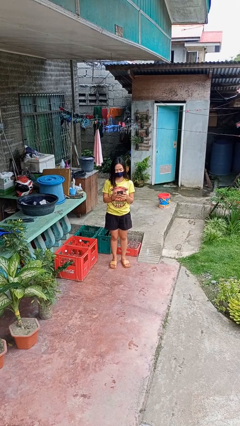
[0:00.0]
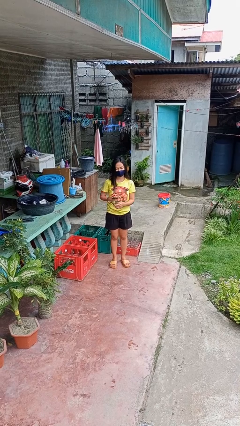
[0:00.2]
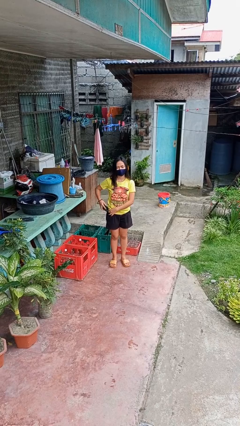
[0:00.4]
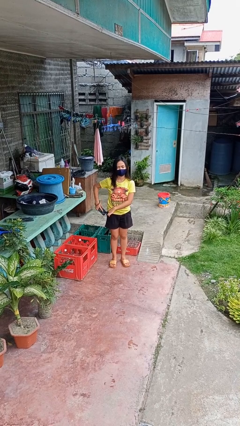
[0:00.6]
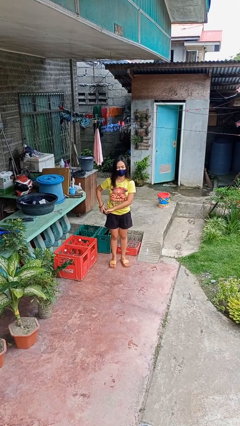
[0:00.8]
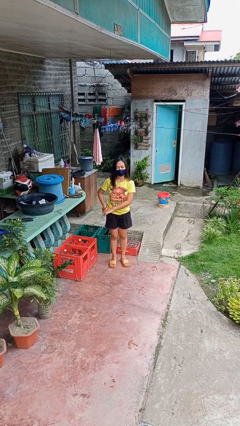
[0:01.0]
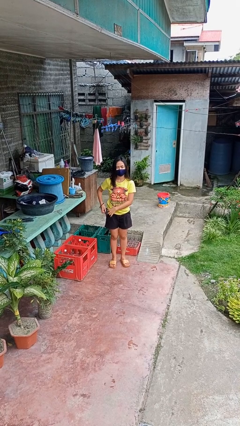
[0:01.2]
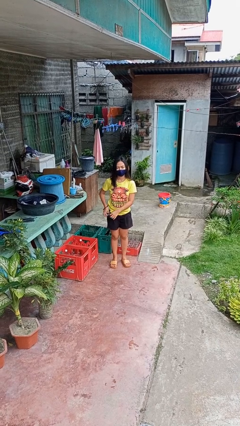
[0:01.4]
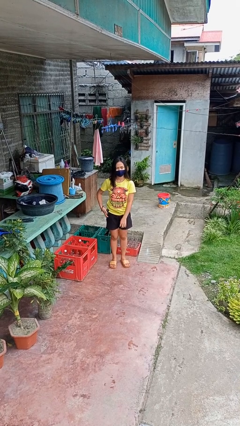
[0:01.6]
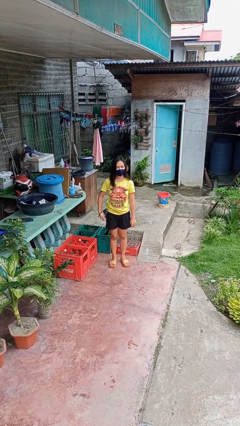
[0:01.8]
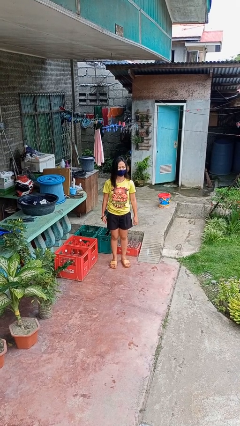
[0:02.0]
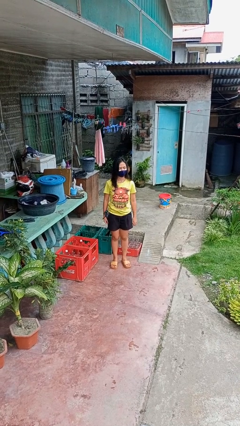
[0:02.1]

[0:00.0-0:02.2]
person puts phone into pocket

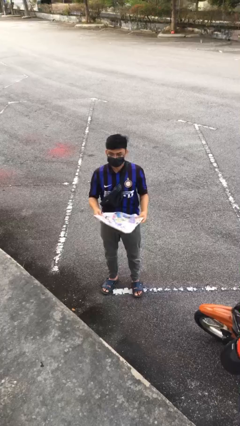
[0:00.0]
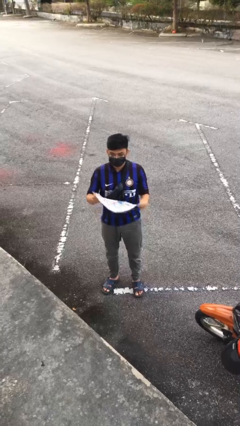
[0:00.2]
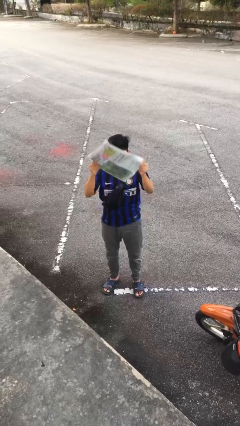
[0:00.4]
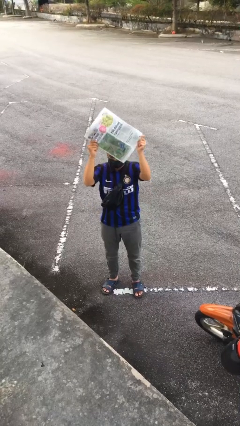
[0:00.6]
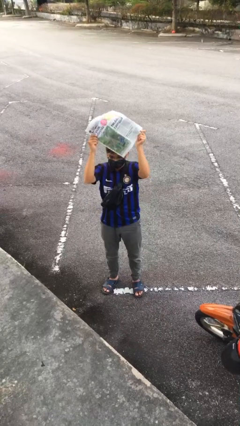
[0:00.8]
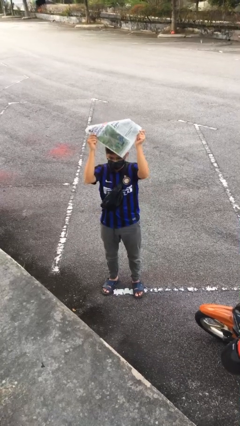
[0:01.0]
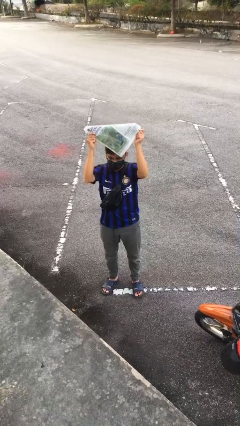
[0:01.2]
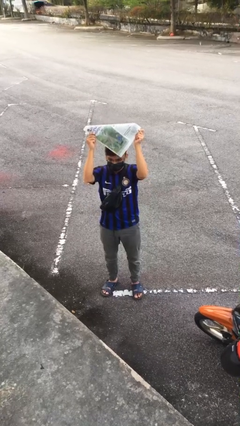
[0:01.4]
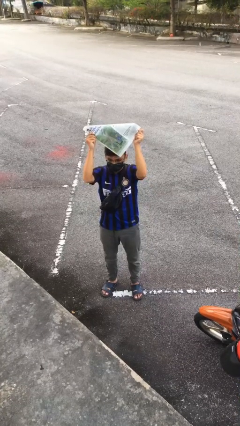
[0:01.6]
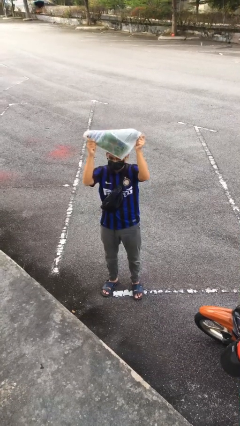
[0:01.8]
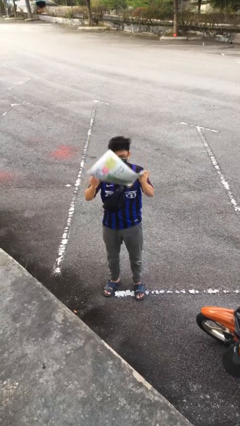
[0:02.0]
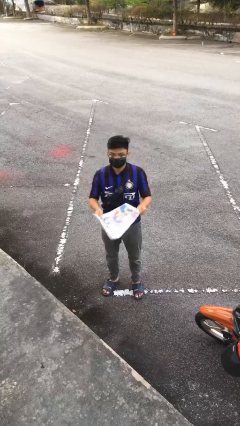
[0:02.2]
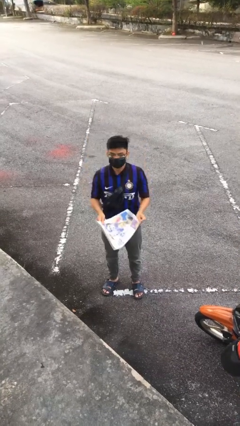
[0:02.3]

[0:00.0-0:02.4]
person holds object above head

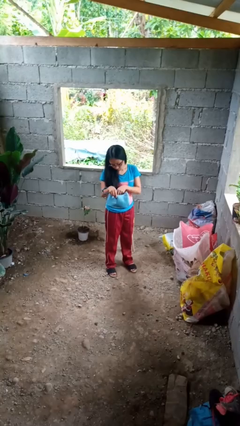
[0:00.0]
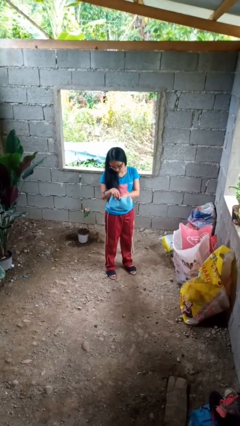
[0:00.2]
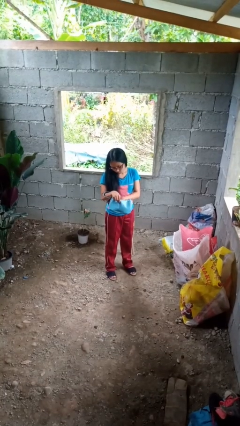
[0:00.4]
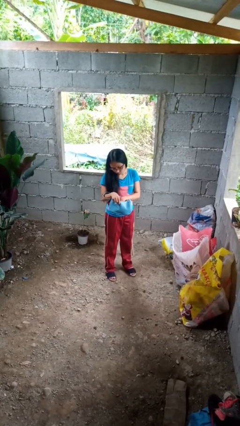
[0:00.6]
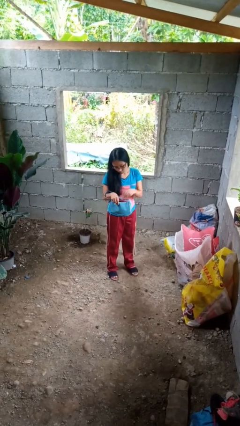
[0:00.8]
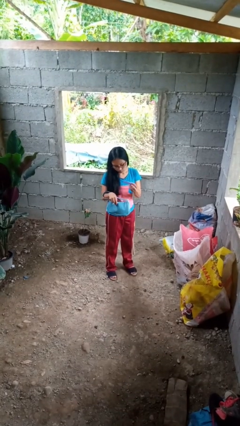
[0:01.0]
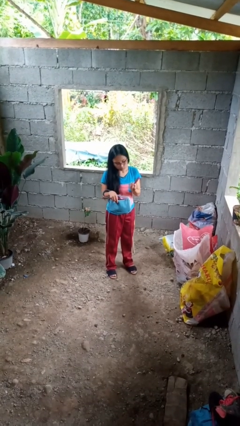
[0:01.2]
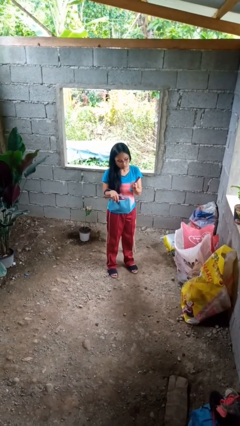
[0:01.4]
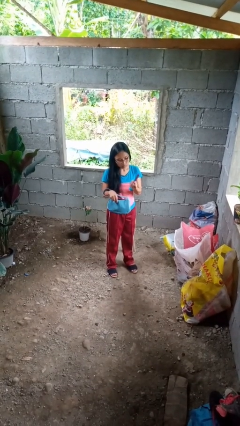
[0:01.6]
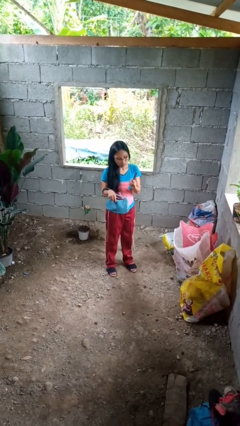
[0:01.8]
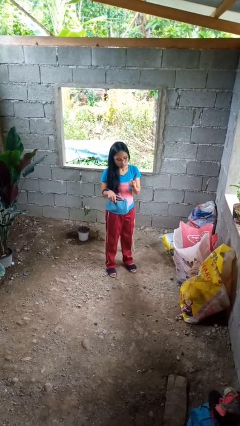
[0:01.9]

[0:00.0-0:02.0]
person takes object from purse

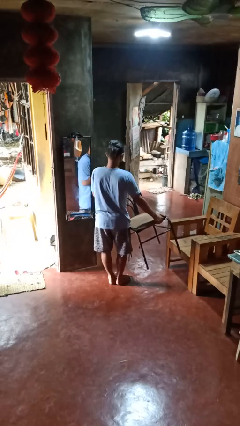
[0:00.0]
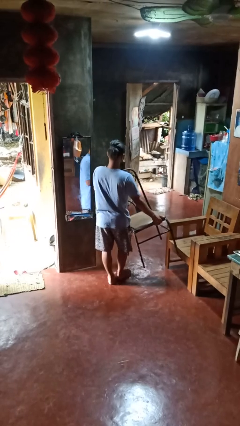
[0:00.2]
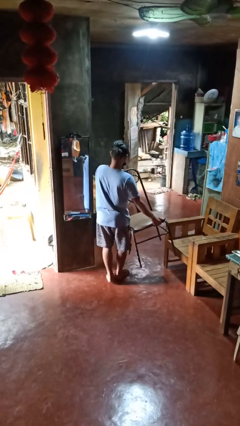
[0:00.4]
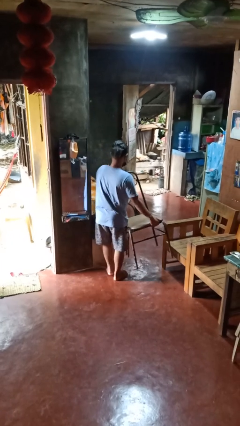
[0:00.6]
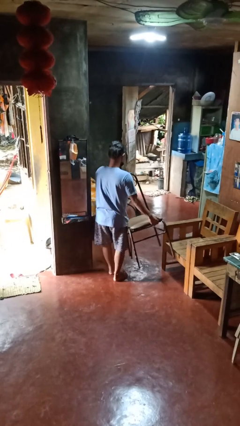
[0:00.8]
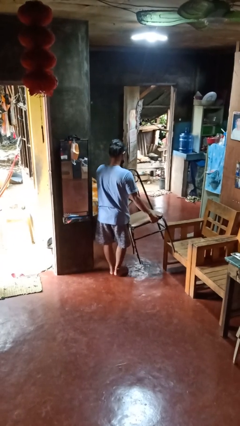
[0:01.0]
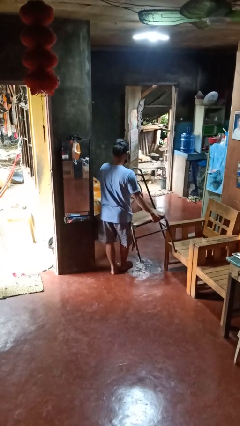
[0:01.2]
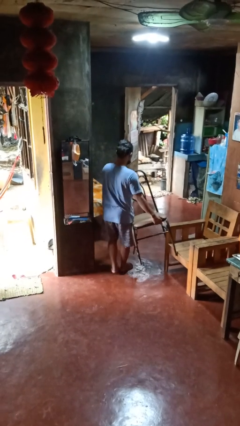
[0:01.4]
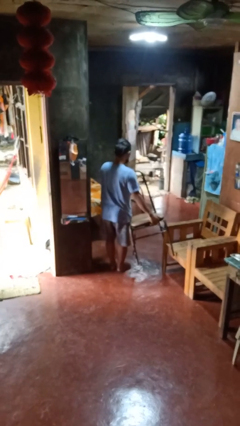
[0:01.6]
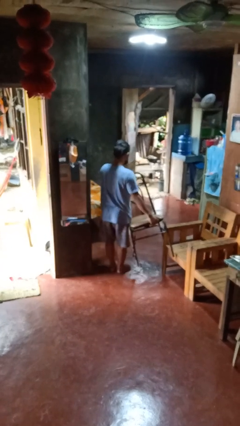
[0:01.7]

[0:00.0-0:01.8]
person carries furniture

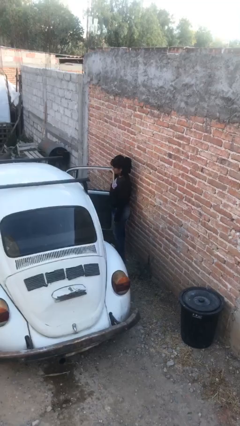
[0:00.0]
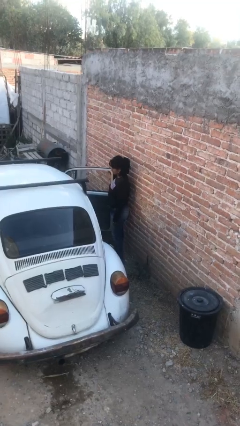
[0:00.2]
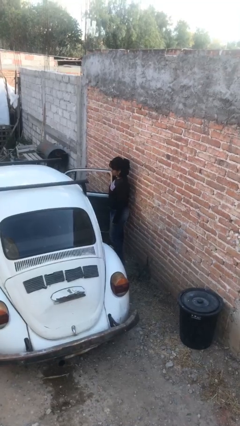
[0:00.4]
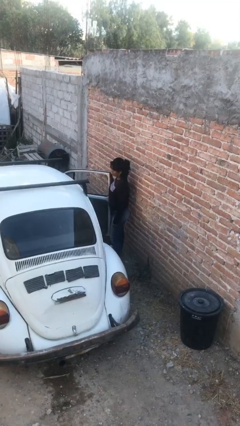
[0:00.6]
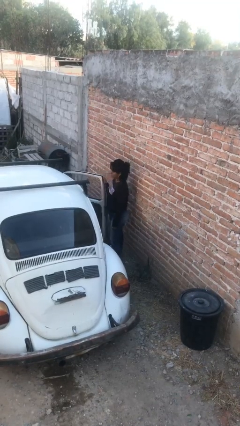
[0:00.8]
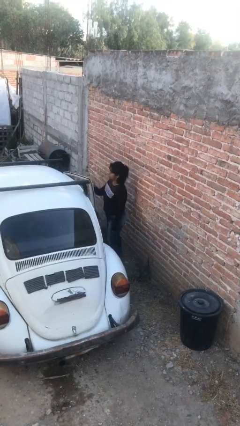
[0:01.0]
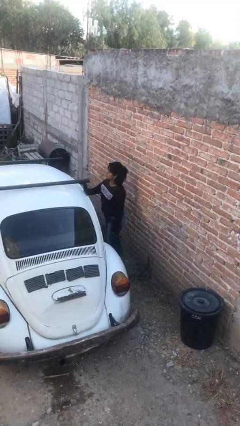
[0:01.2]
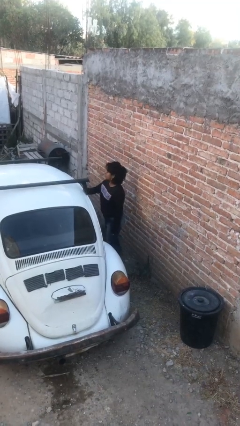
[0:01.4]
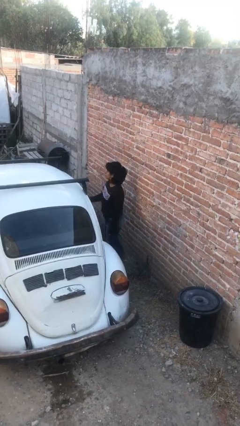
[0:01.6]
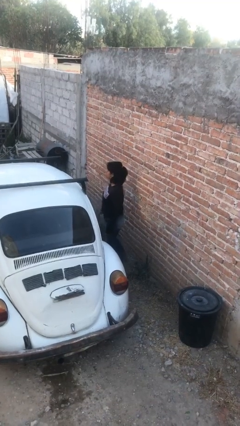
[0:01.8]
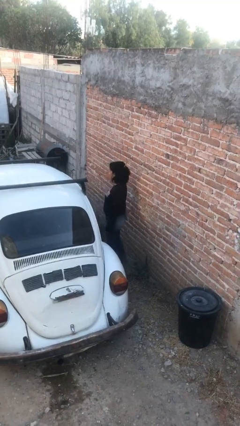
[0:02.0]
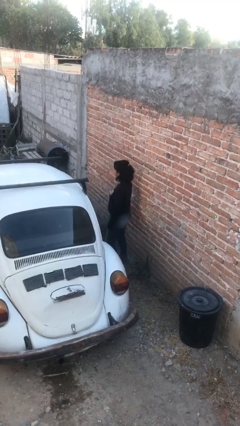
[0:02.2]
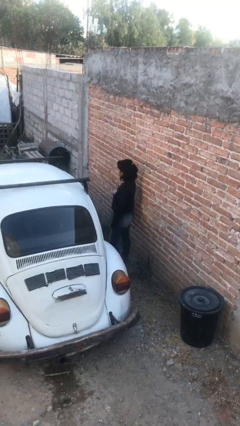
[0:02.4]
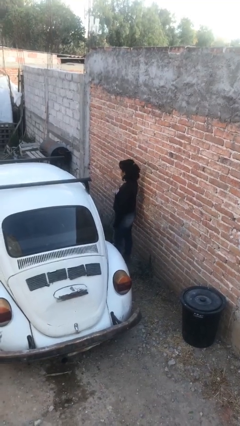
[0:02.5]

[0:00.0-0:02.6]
person closes car door

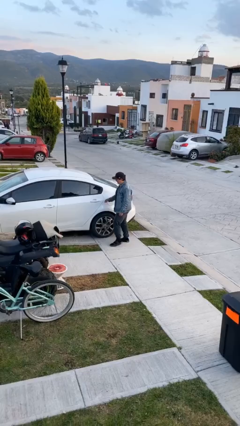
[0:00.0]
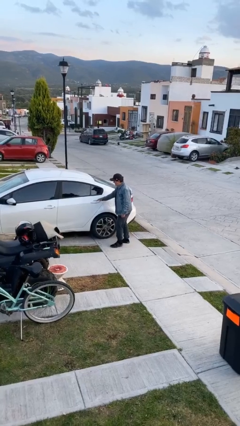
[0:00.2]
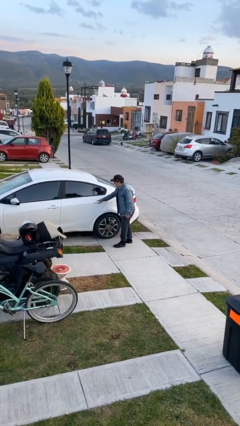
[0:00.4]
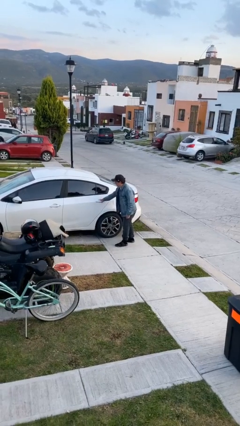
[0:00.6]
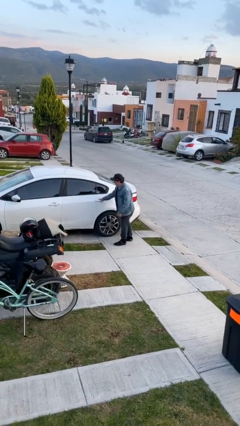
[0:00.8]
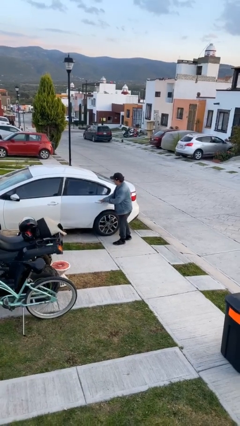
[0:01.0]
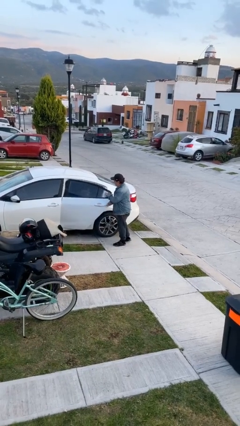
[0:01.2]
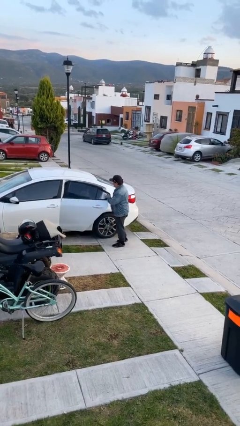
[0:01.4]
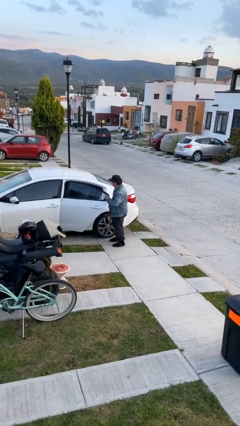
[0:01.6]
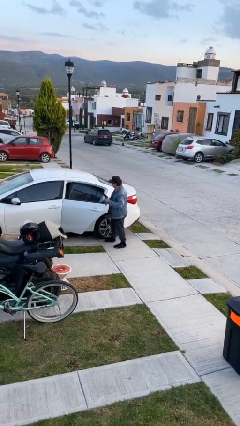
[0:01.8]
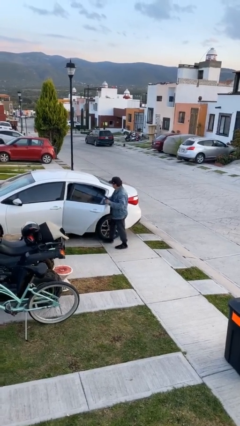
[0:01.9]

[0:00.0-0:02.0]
person opens car door

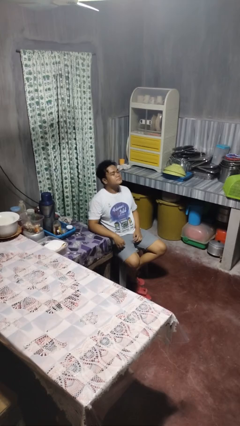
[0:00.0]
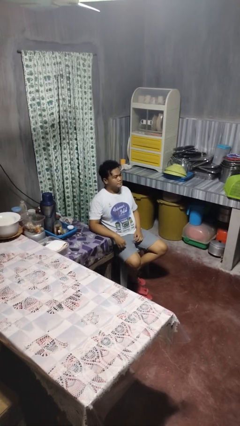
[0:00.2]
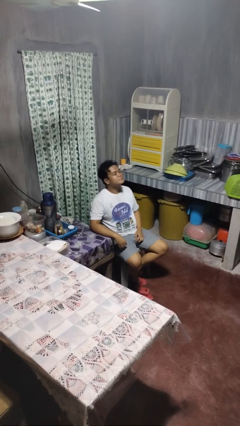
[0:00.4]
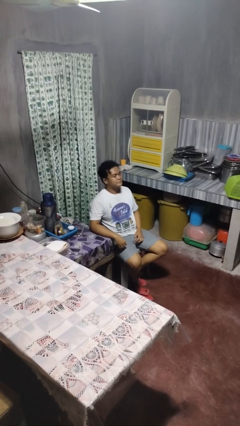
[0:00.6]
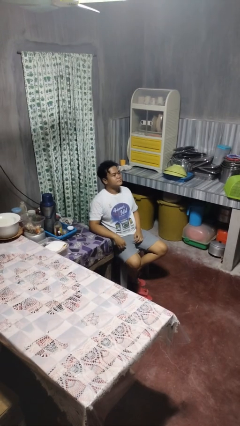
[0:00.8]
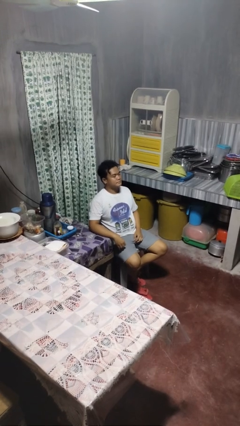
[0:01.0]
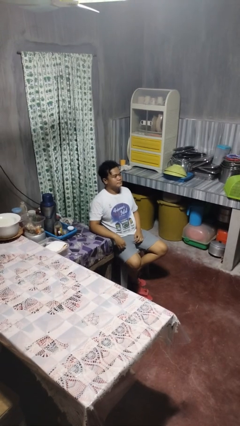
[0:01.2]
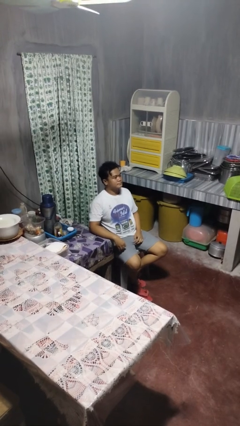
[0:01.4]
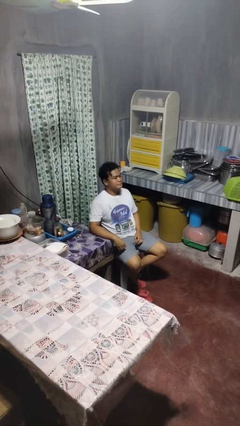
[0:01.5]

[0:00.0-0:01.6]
person nods head

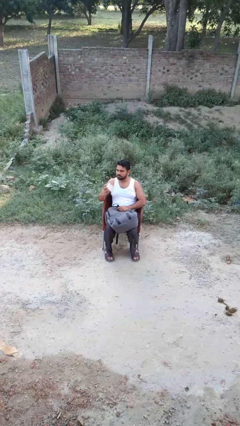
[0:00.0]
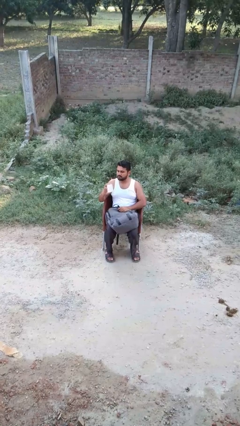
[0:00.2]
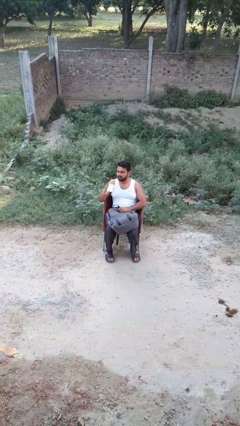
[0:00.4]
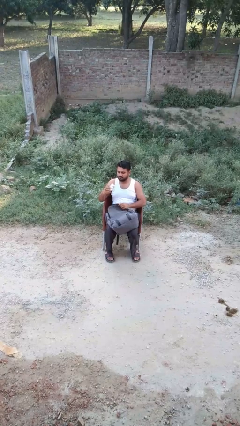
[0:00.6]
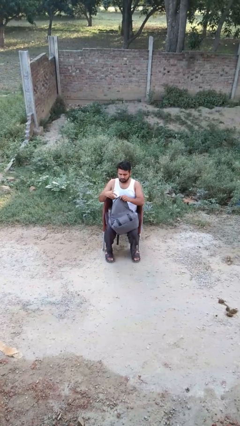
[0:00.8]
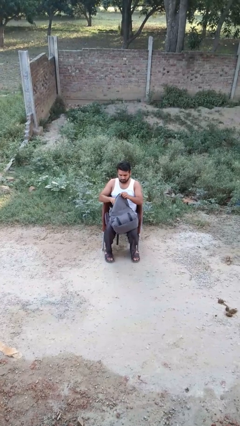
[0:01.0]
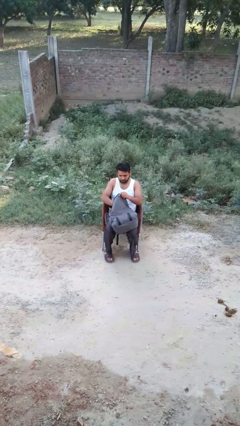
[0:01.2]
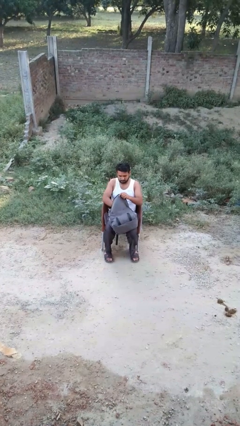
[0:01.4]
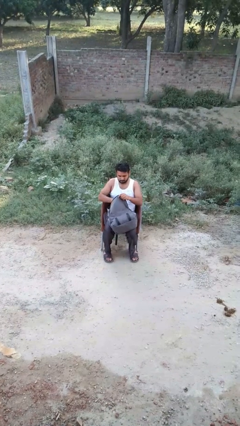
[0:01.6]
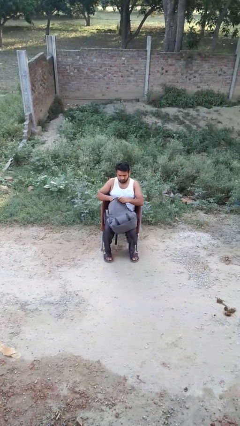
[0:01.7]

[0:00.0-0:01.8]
person puts object into backpack

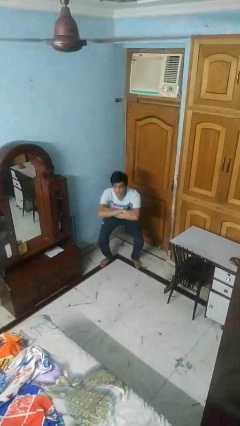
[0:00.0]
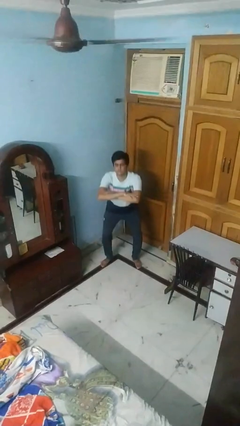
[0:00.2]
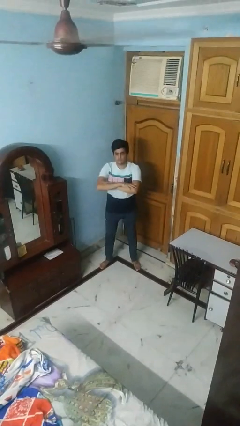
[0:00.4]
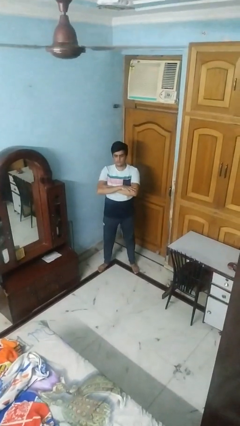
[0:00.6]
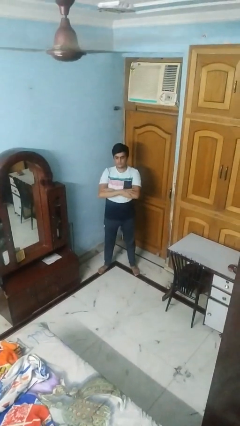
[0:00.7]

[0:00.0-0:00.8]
person stands up
